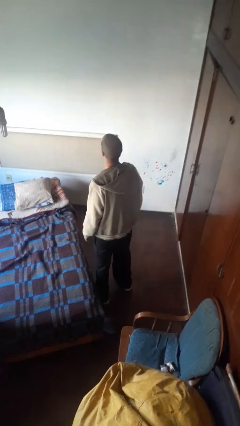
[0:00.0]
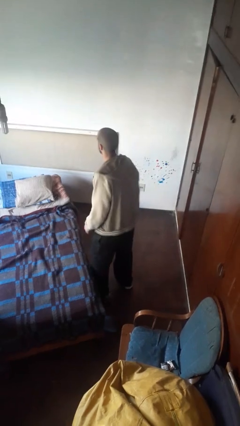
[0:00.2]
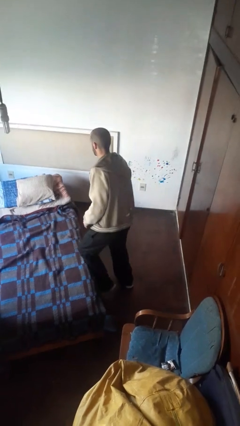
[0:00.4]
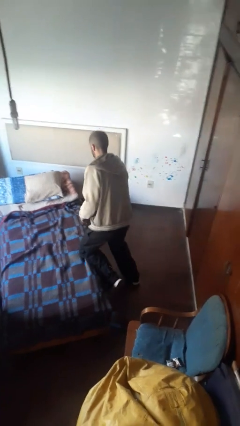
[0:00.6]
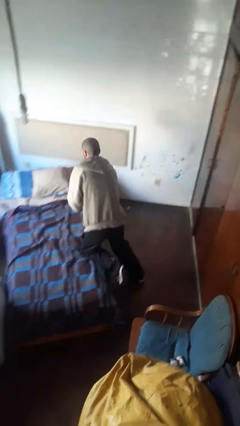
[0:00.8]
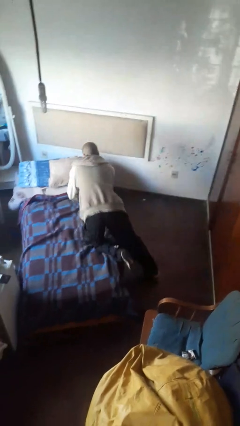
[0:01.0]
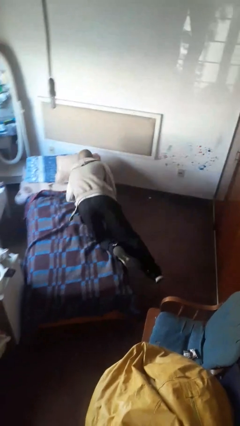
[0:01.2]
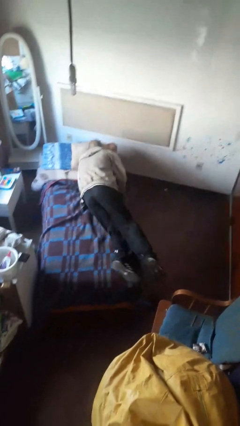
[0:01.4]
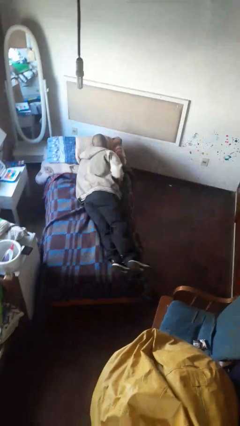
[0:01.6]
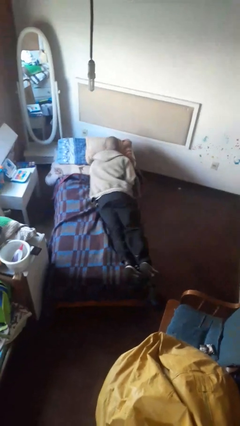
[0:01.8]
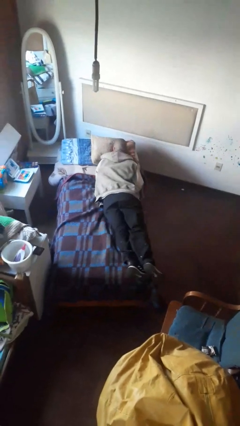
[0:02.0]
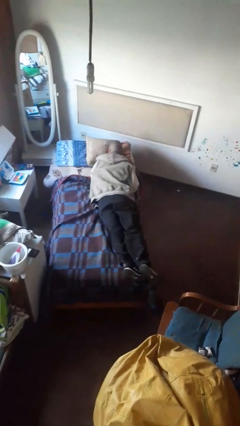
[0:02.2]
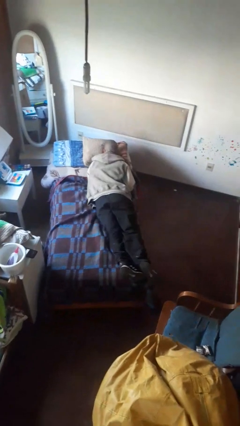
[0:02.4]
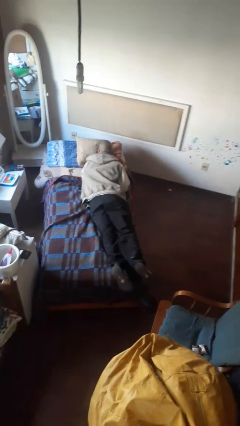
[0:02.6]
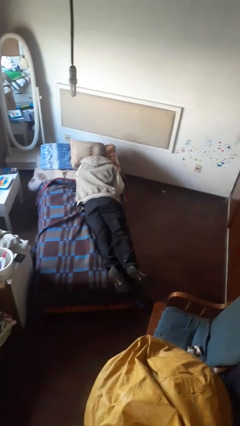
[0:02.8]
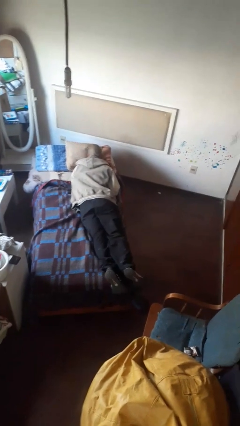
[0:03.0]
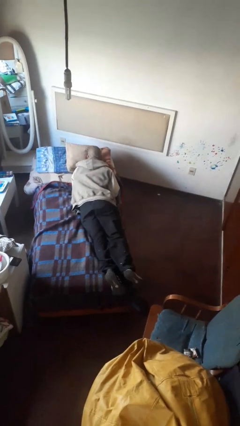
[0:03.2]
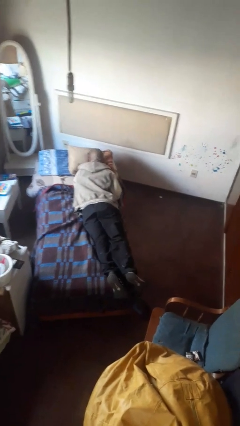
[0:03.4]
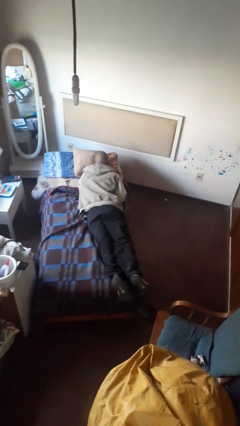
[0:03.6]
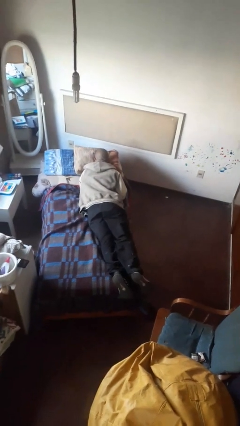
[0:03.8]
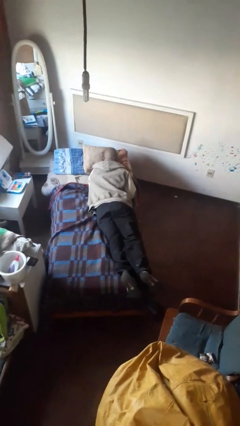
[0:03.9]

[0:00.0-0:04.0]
person lies down on bed

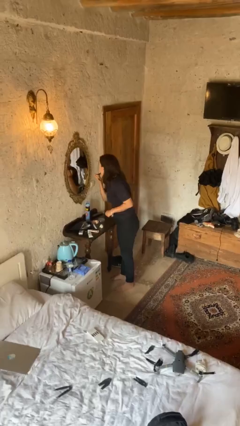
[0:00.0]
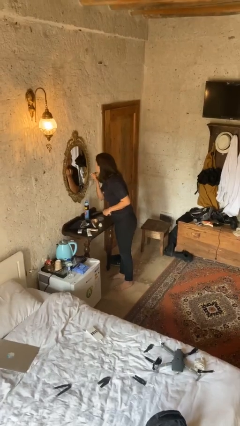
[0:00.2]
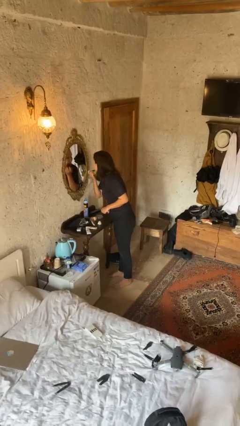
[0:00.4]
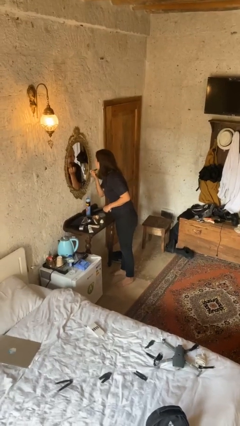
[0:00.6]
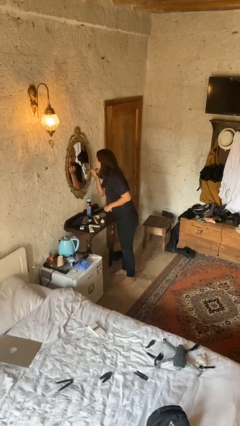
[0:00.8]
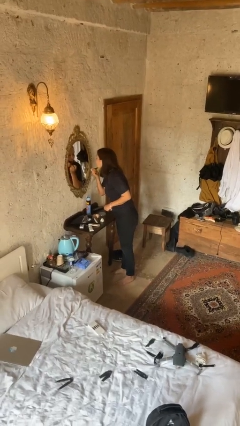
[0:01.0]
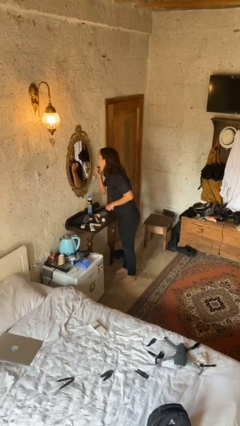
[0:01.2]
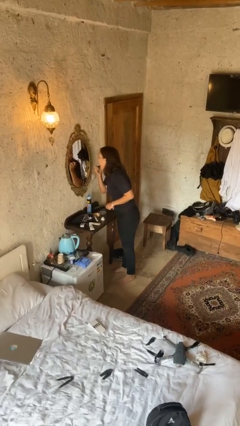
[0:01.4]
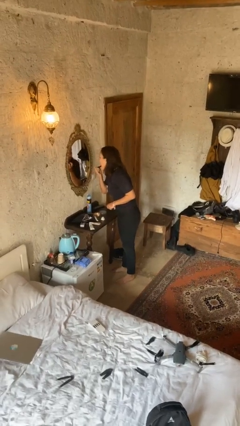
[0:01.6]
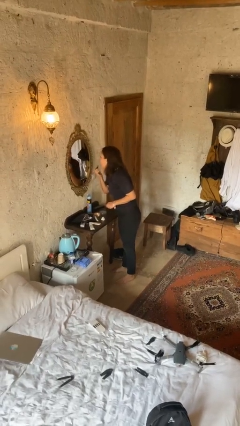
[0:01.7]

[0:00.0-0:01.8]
person applies lip makeup

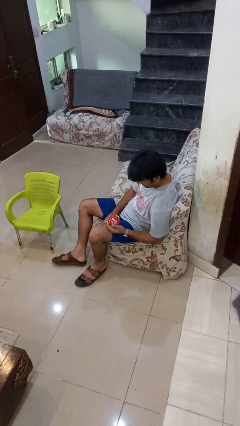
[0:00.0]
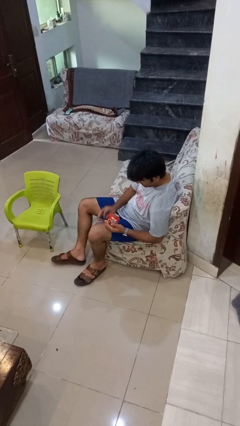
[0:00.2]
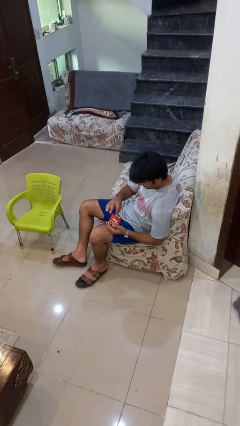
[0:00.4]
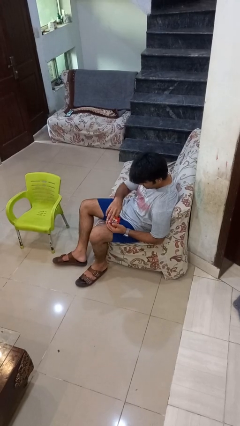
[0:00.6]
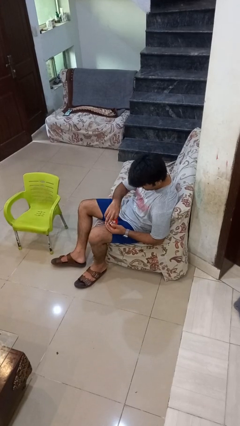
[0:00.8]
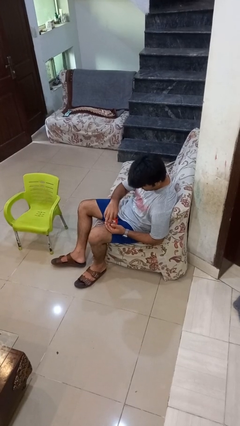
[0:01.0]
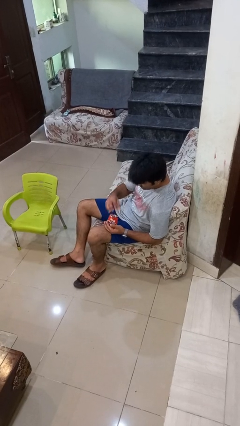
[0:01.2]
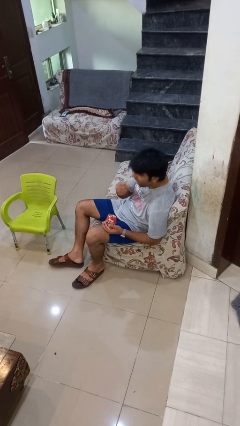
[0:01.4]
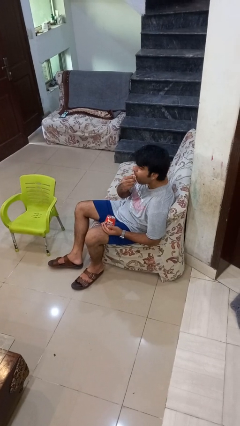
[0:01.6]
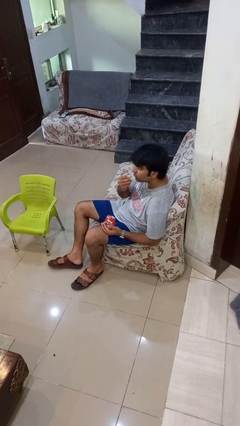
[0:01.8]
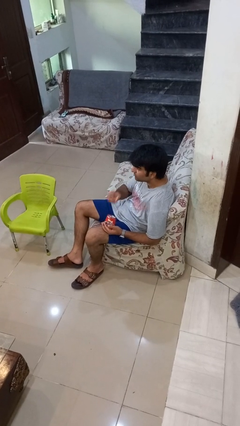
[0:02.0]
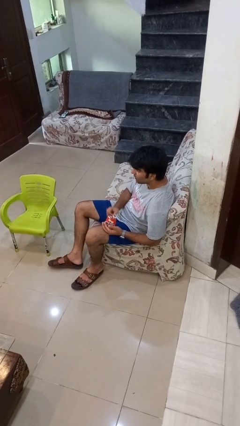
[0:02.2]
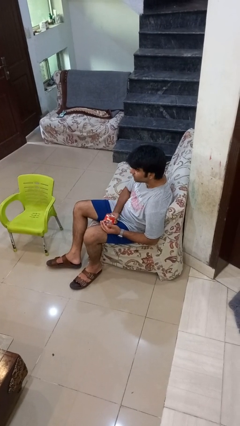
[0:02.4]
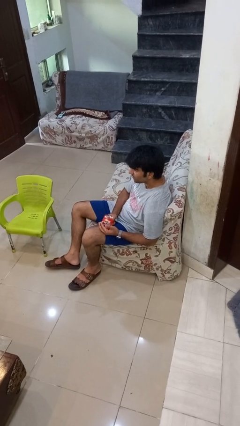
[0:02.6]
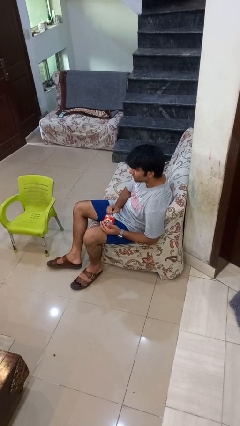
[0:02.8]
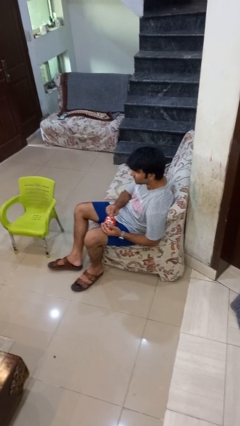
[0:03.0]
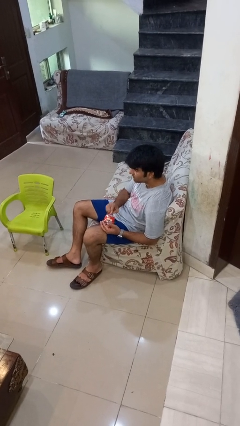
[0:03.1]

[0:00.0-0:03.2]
person eats snack from bag

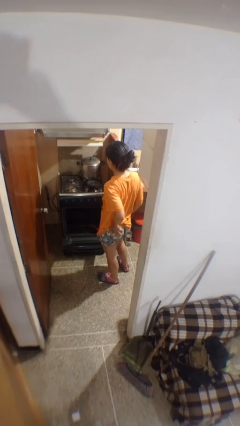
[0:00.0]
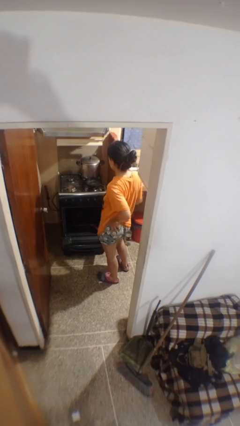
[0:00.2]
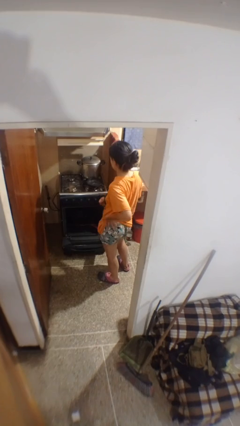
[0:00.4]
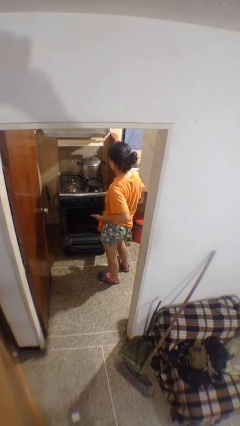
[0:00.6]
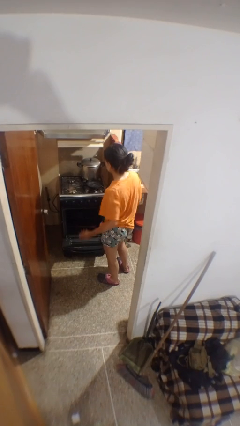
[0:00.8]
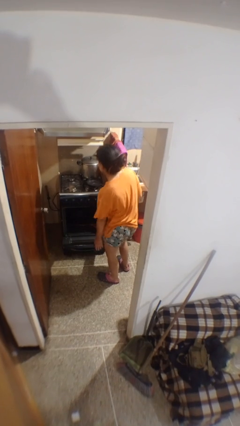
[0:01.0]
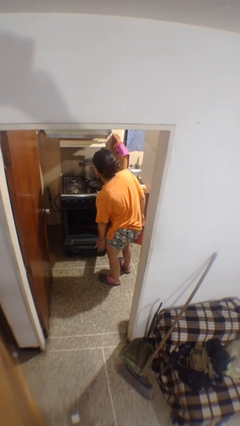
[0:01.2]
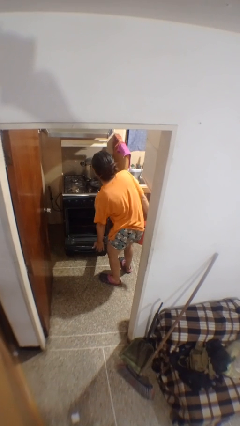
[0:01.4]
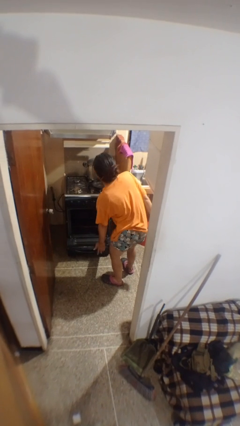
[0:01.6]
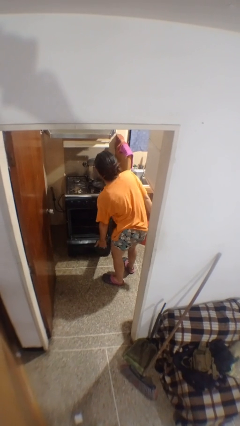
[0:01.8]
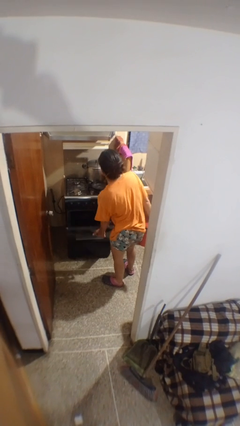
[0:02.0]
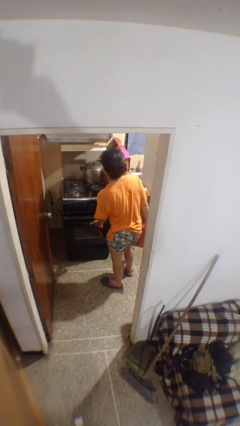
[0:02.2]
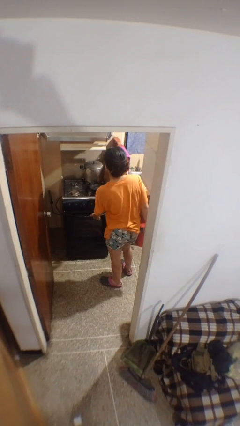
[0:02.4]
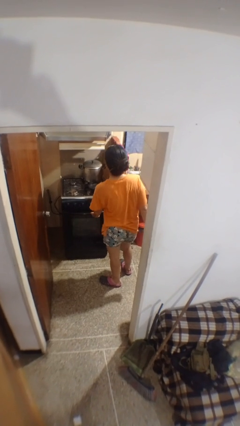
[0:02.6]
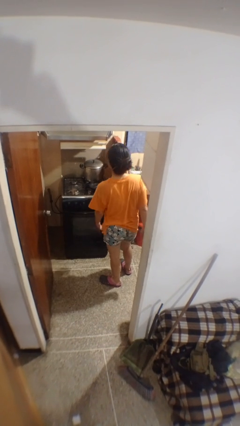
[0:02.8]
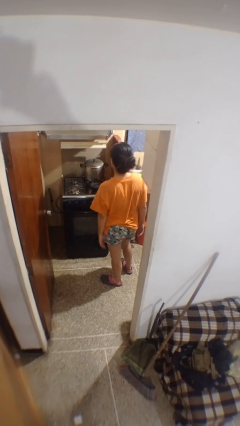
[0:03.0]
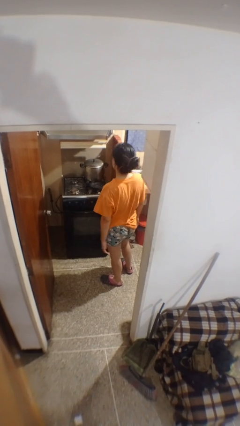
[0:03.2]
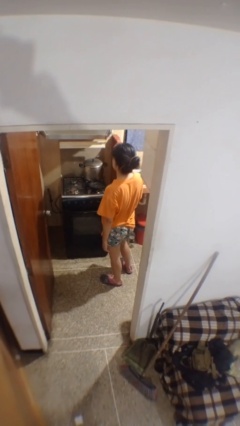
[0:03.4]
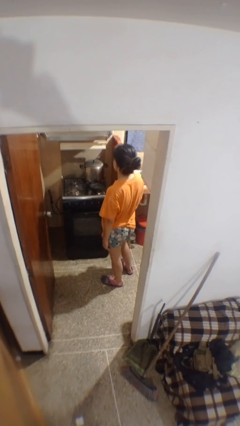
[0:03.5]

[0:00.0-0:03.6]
person closes oven door

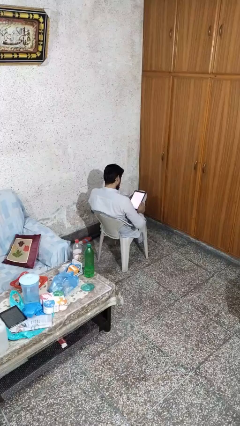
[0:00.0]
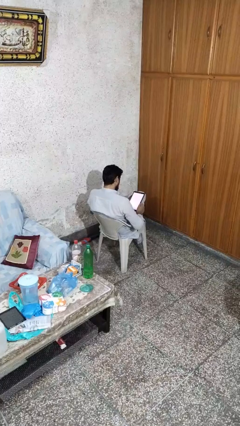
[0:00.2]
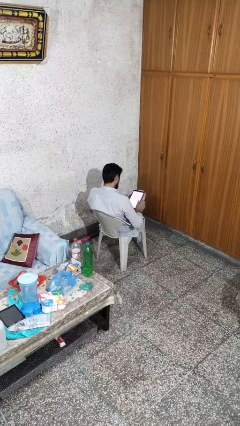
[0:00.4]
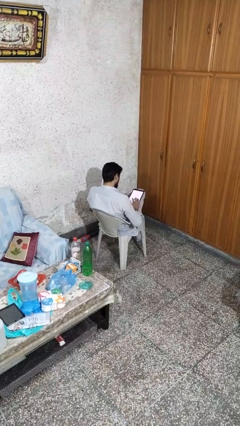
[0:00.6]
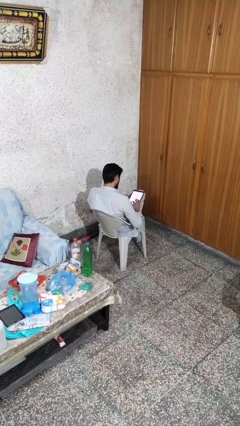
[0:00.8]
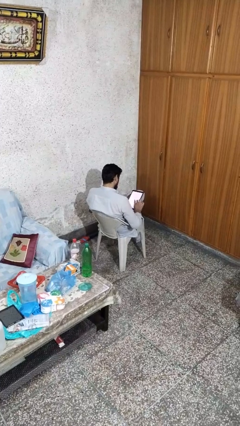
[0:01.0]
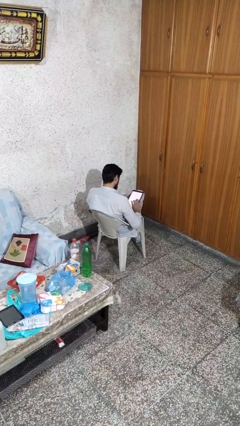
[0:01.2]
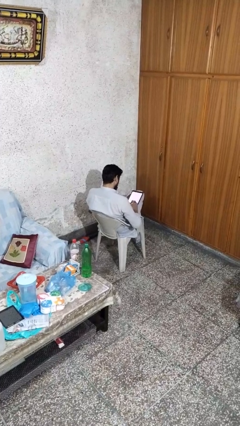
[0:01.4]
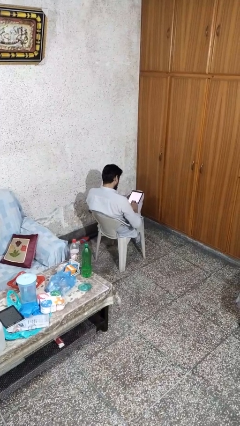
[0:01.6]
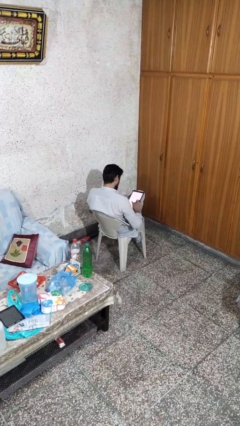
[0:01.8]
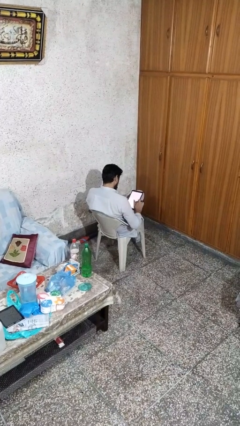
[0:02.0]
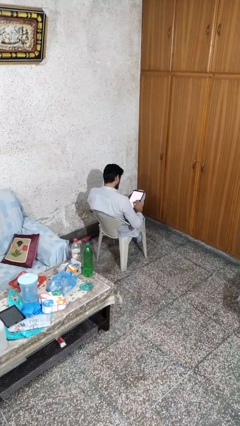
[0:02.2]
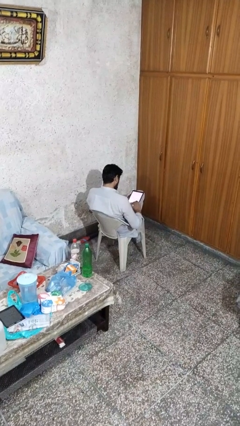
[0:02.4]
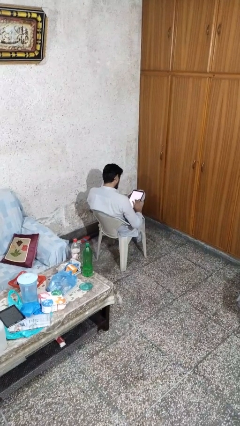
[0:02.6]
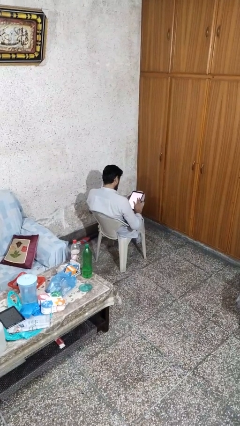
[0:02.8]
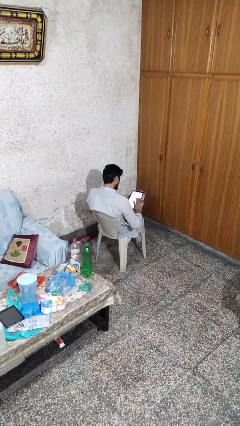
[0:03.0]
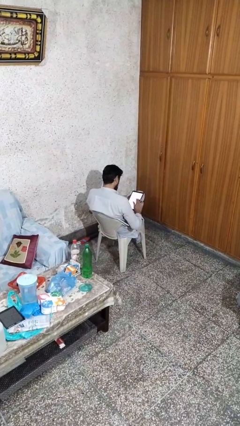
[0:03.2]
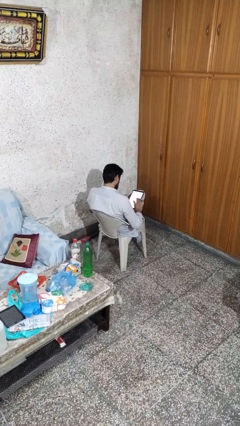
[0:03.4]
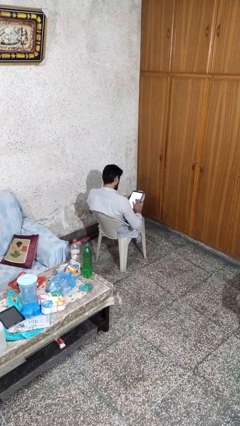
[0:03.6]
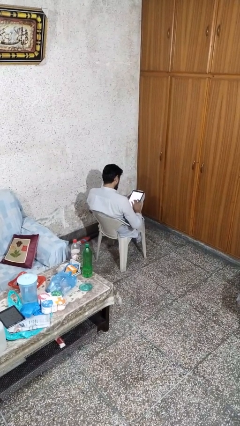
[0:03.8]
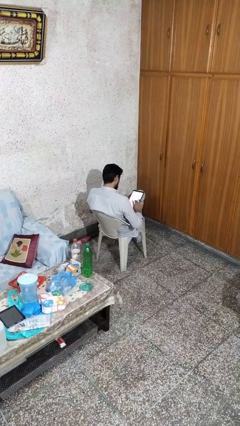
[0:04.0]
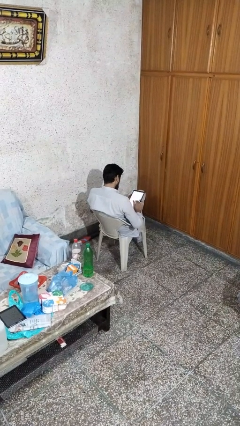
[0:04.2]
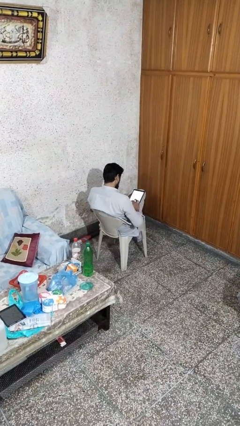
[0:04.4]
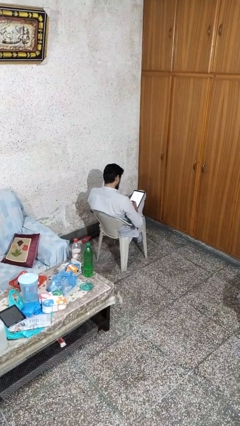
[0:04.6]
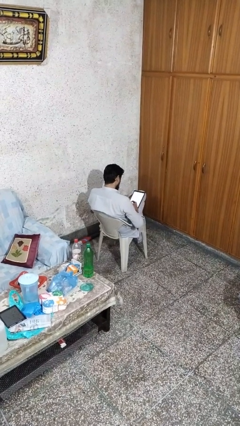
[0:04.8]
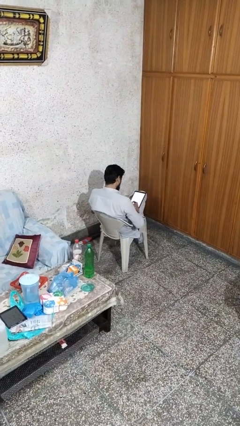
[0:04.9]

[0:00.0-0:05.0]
person interacts with tablet
